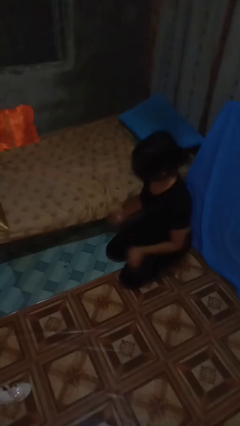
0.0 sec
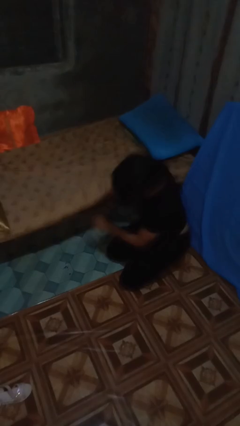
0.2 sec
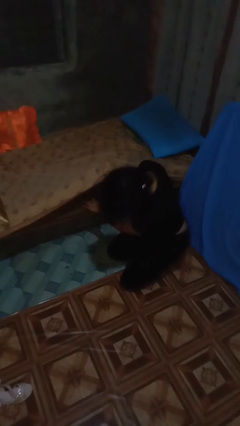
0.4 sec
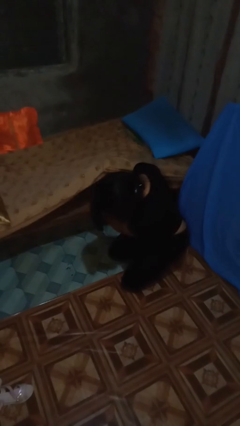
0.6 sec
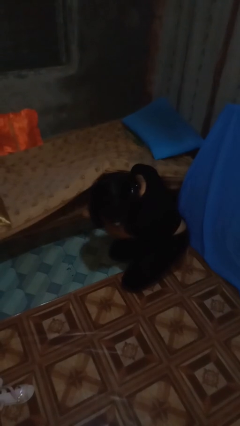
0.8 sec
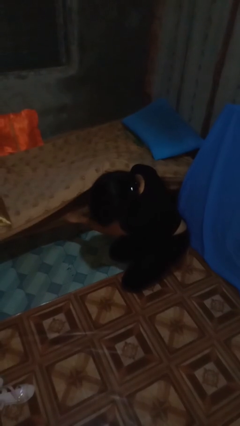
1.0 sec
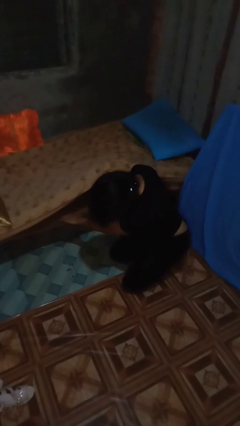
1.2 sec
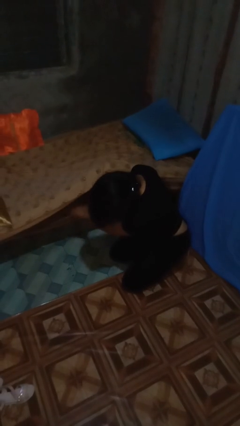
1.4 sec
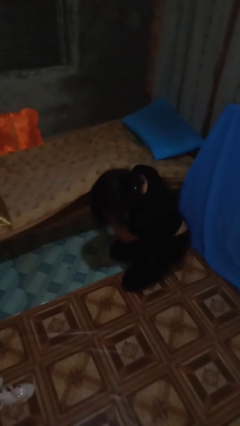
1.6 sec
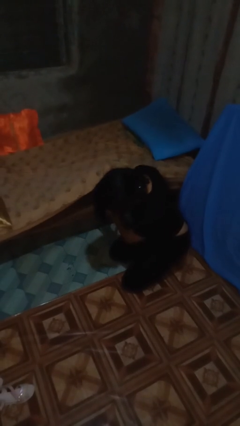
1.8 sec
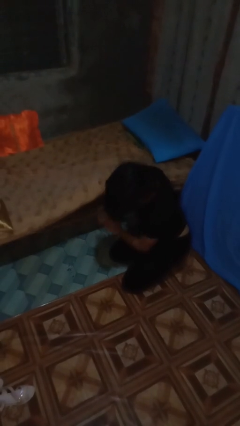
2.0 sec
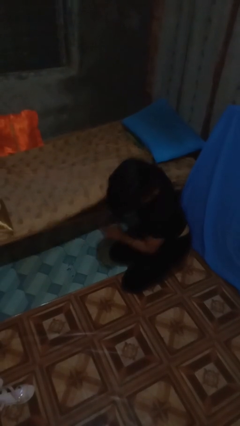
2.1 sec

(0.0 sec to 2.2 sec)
person searches under bed

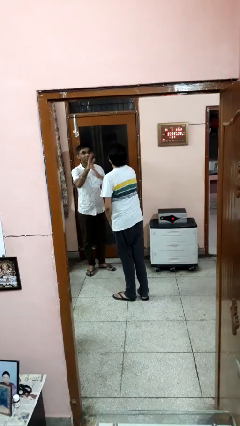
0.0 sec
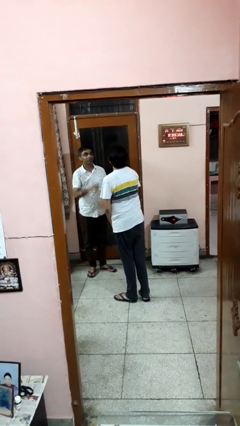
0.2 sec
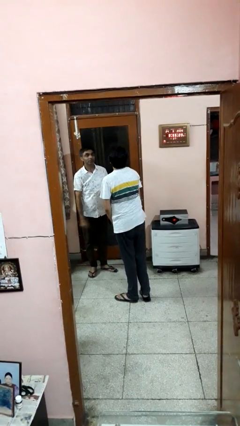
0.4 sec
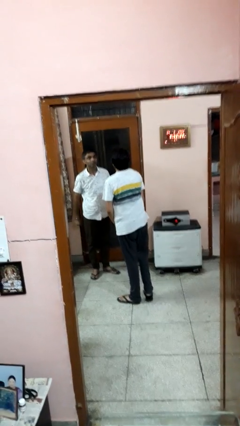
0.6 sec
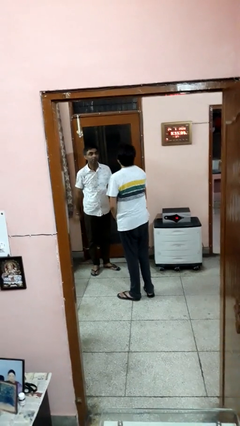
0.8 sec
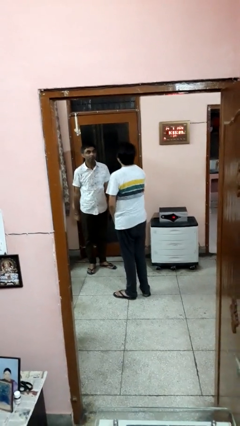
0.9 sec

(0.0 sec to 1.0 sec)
person highfives hand

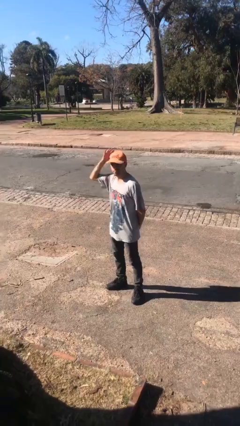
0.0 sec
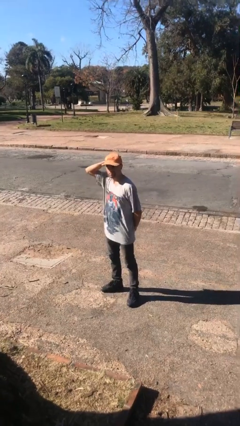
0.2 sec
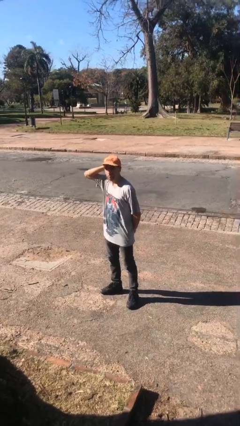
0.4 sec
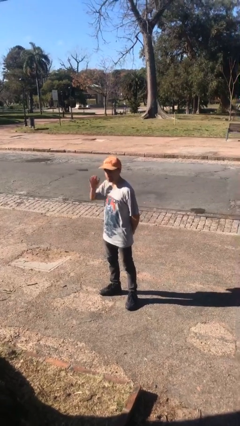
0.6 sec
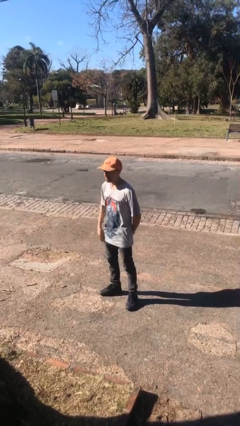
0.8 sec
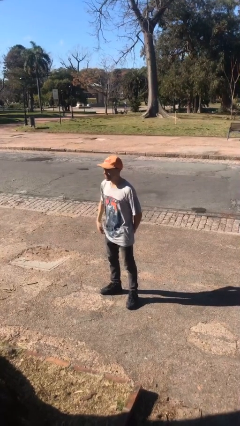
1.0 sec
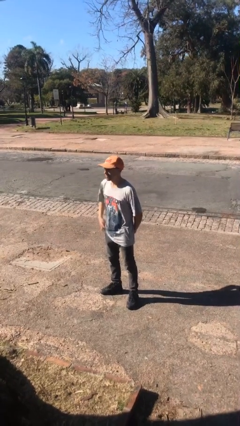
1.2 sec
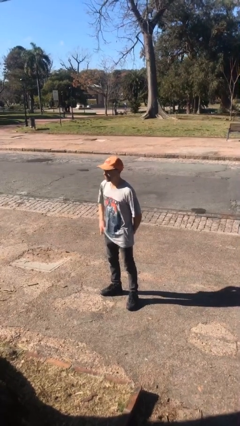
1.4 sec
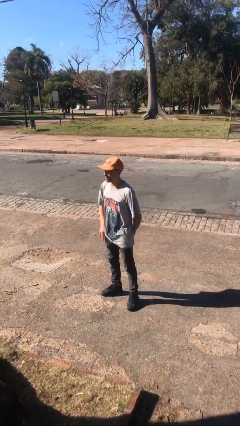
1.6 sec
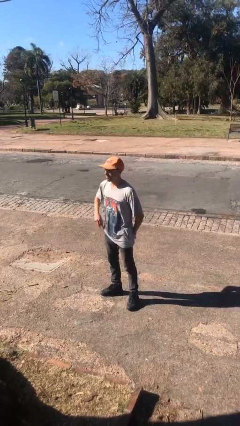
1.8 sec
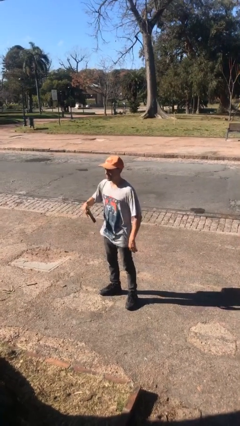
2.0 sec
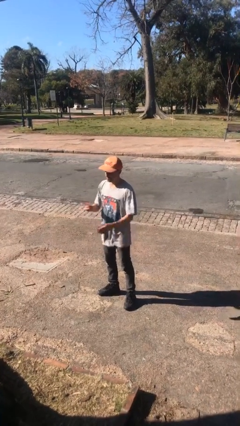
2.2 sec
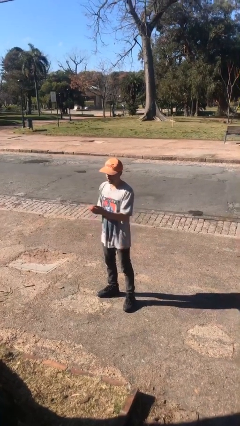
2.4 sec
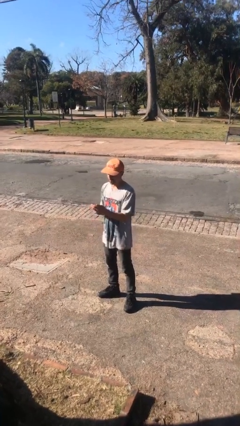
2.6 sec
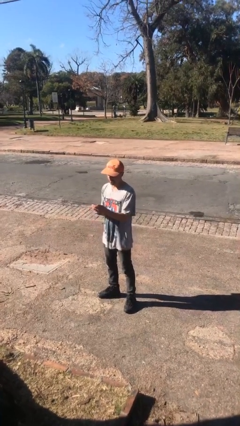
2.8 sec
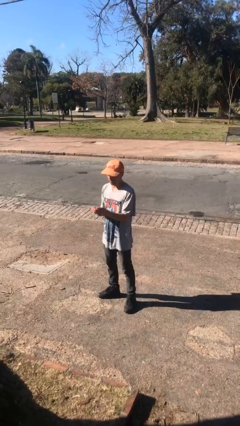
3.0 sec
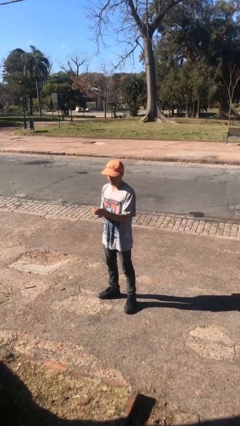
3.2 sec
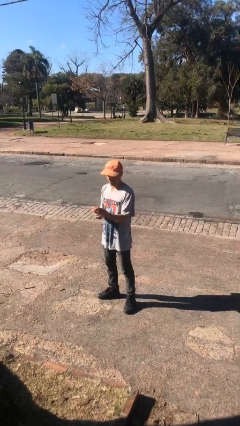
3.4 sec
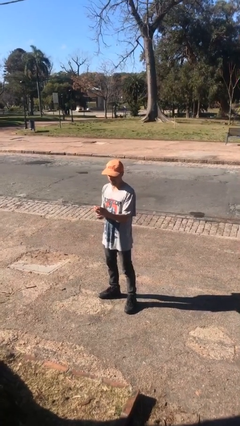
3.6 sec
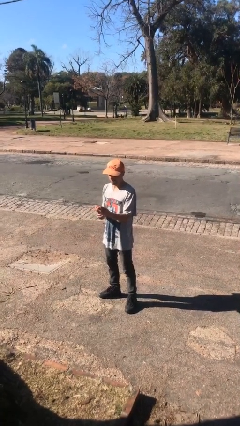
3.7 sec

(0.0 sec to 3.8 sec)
person takes phone from pocket

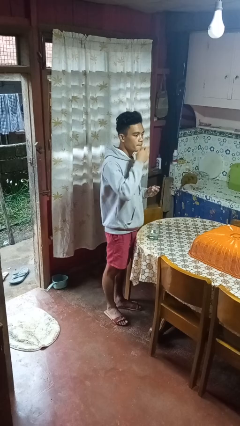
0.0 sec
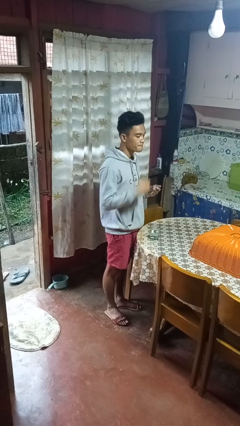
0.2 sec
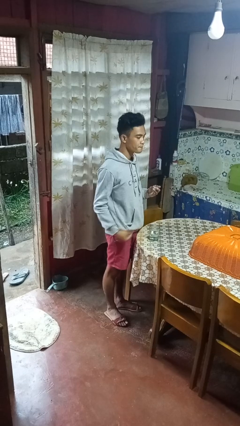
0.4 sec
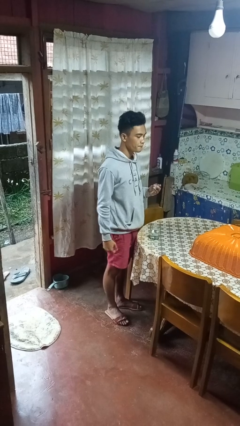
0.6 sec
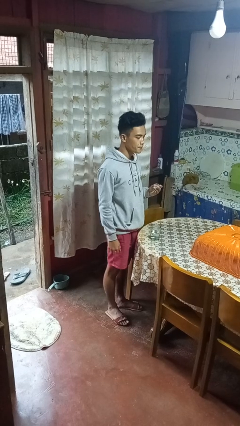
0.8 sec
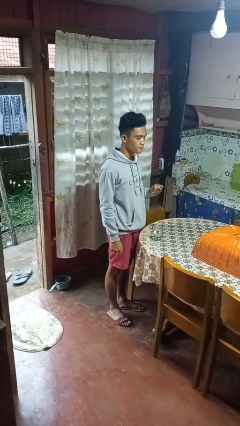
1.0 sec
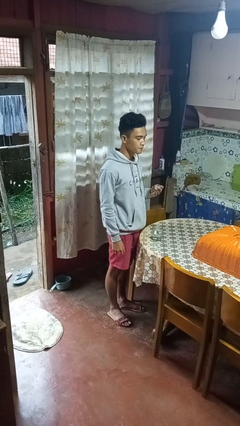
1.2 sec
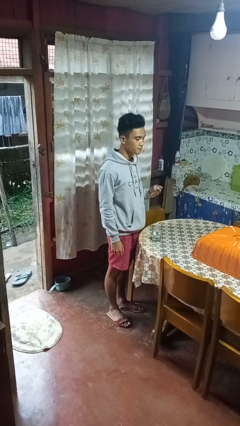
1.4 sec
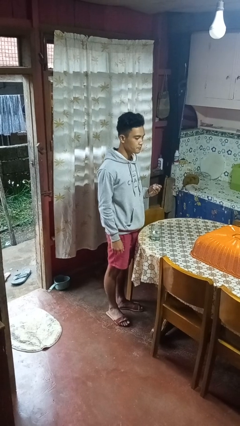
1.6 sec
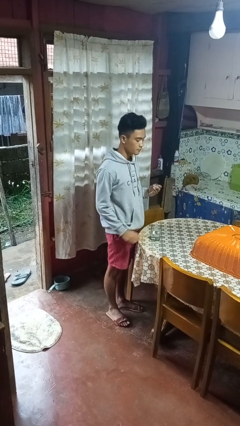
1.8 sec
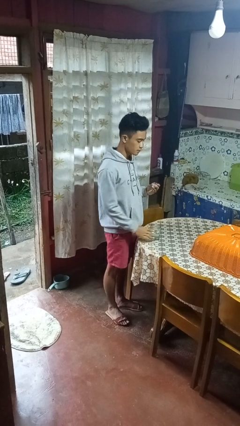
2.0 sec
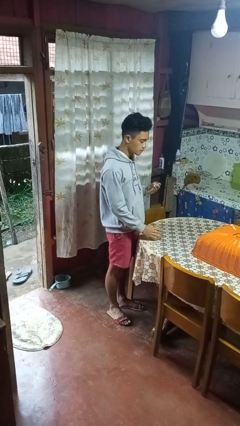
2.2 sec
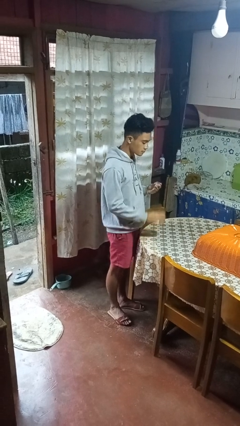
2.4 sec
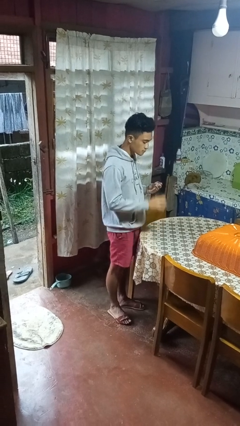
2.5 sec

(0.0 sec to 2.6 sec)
person takes medicine pills

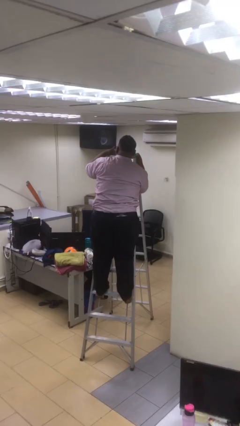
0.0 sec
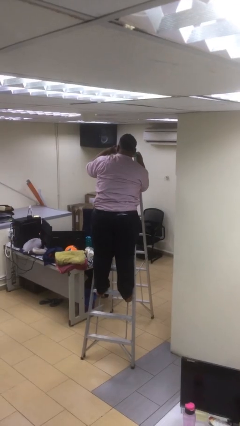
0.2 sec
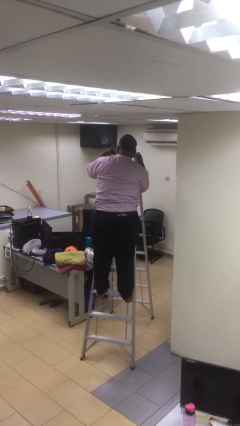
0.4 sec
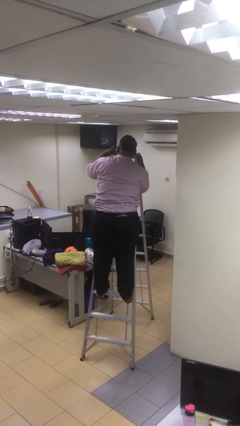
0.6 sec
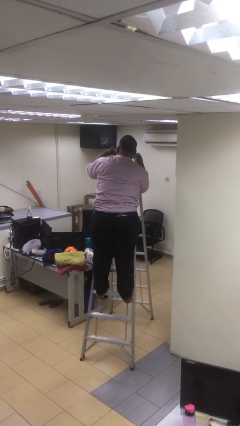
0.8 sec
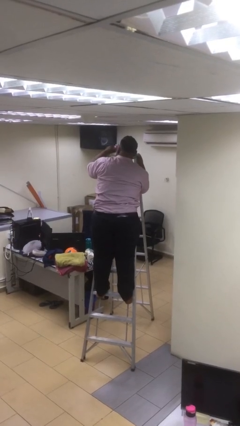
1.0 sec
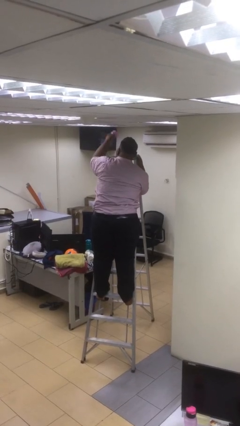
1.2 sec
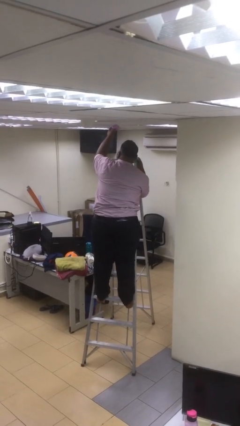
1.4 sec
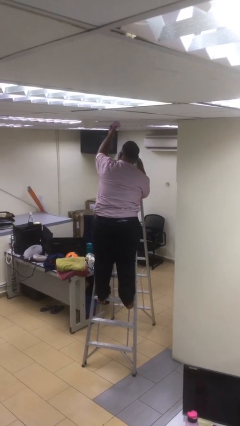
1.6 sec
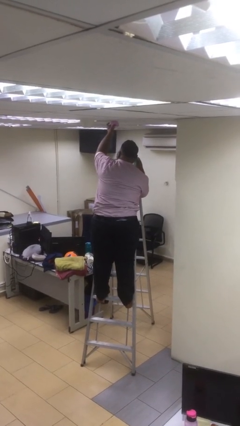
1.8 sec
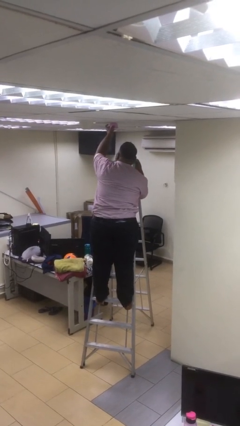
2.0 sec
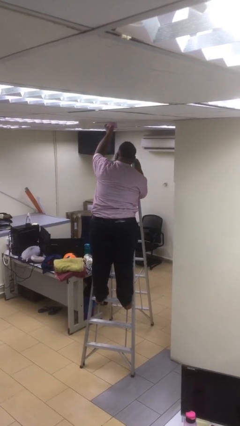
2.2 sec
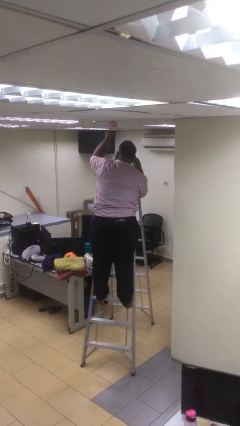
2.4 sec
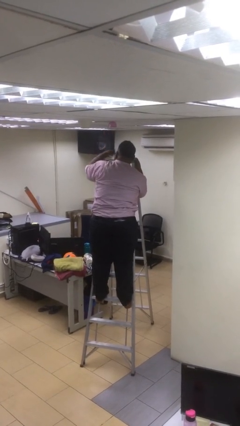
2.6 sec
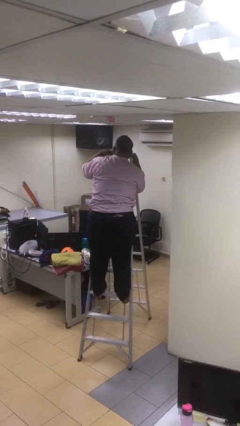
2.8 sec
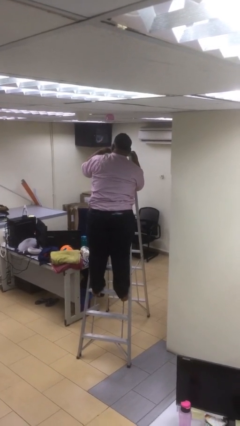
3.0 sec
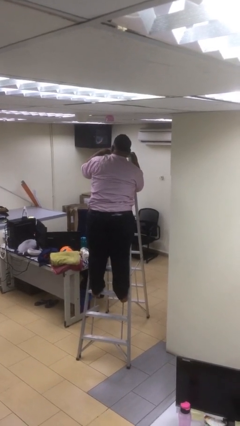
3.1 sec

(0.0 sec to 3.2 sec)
person puts up smoke detector

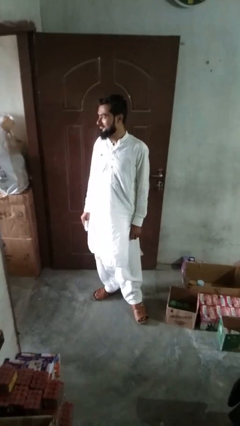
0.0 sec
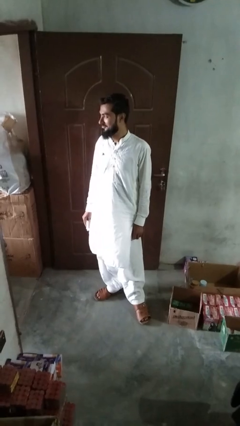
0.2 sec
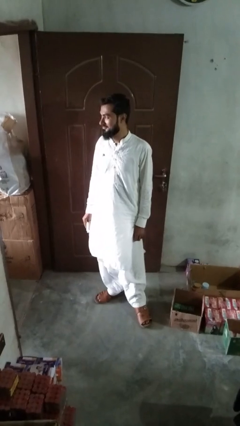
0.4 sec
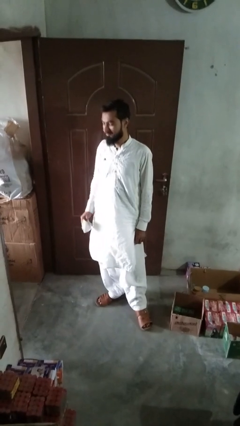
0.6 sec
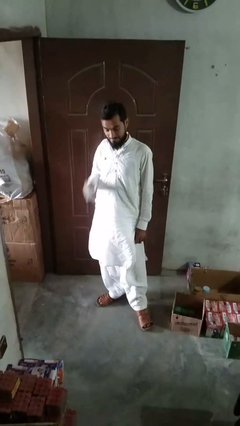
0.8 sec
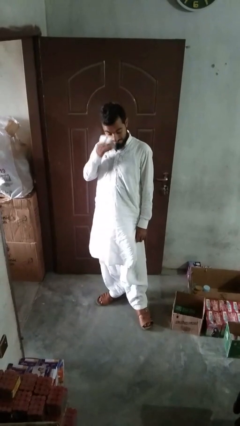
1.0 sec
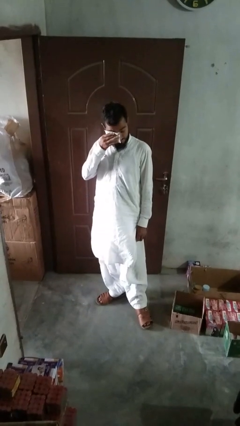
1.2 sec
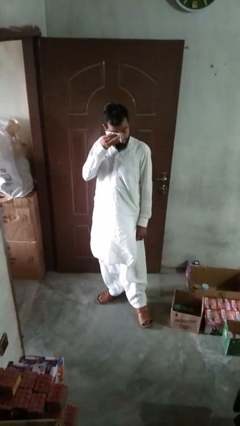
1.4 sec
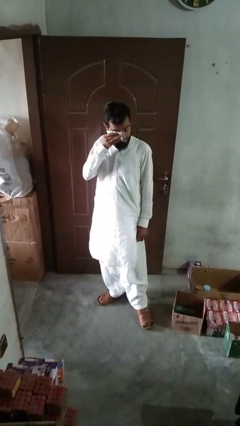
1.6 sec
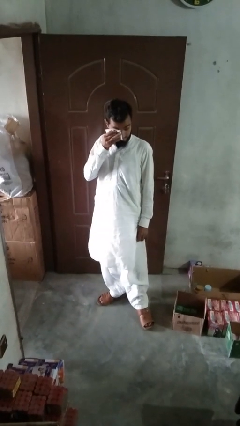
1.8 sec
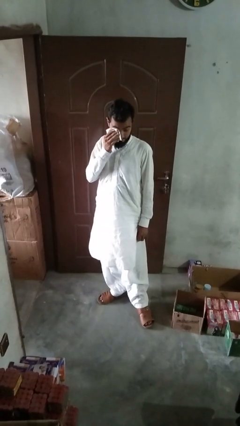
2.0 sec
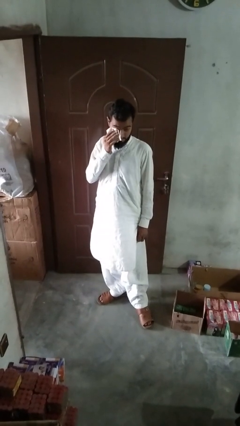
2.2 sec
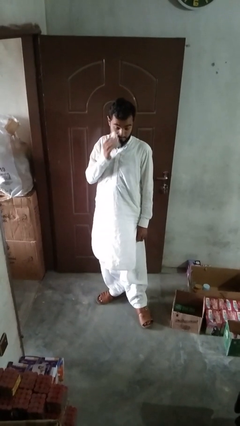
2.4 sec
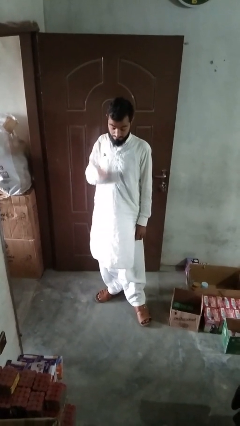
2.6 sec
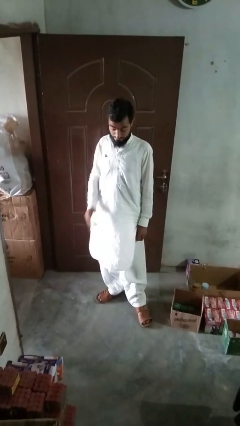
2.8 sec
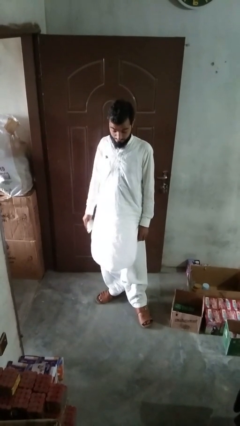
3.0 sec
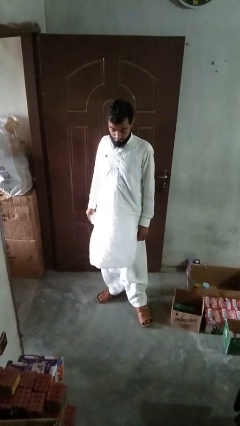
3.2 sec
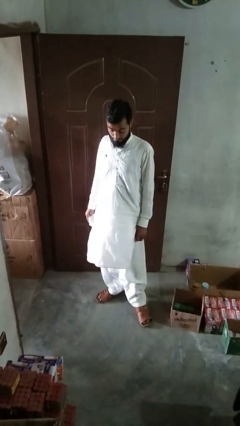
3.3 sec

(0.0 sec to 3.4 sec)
person wipes mouth with napkin

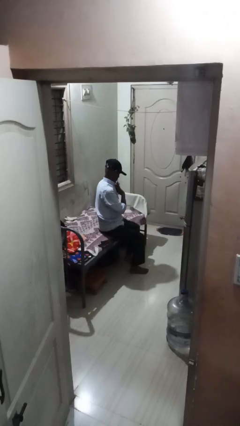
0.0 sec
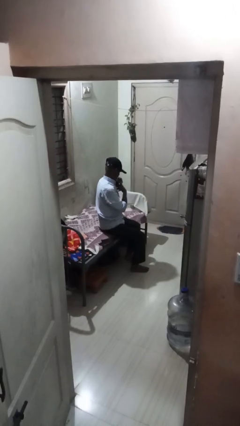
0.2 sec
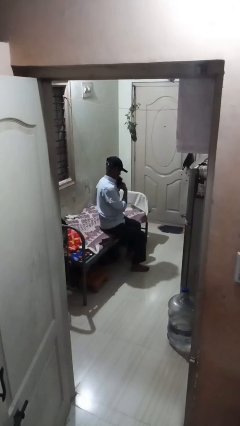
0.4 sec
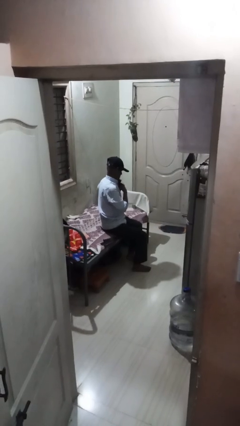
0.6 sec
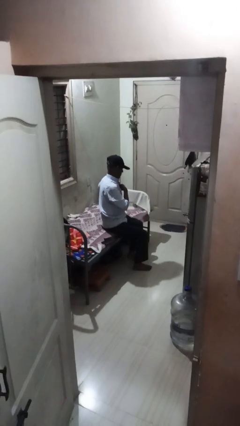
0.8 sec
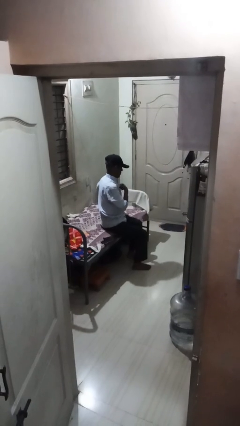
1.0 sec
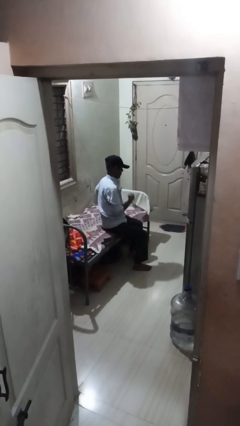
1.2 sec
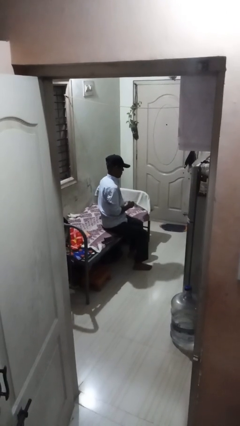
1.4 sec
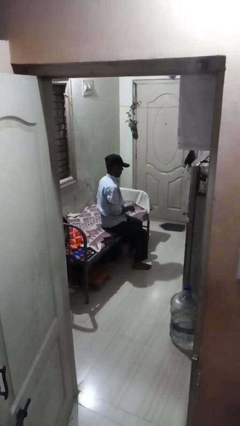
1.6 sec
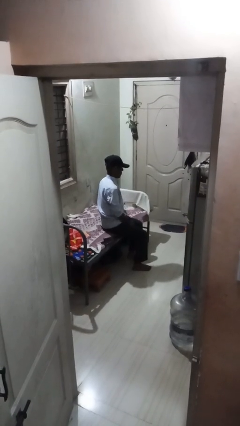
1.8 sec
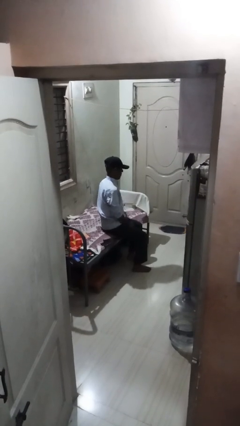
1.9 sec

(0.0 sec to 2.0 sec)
person puts phone into pocket
